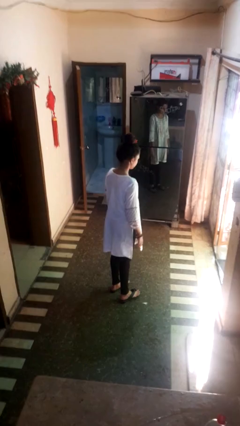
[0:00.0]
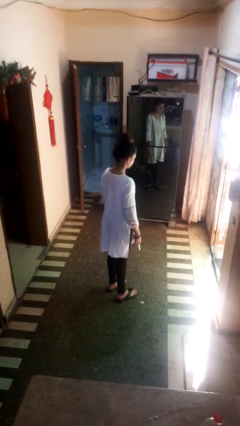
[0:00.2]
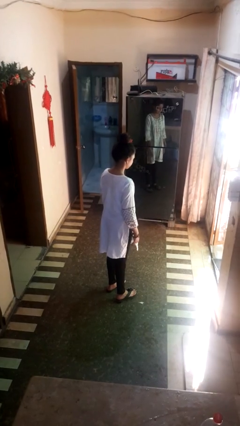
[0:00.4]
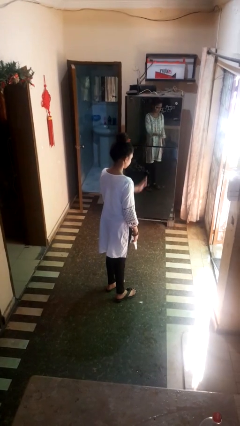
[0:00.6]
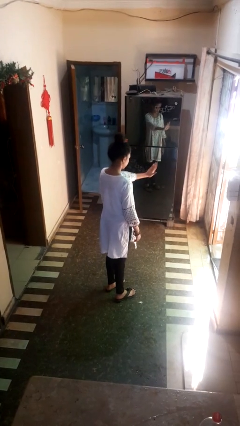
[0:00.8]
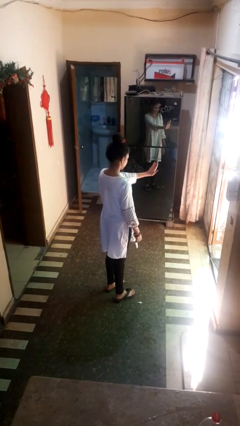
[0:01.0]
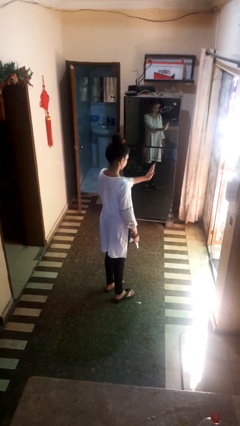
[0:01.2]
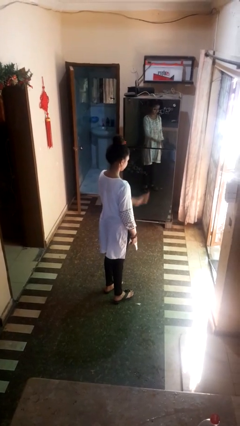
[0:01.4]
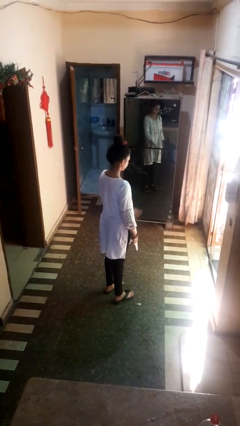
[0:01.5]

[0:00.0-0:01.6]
person gestures stop

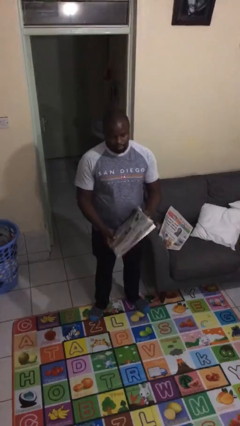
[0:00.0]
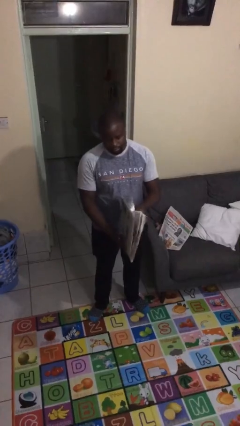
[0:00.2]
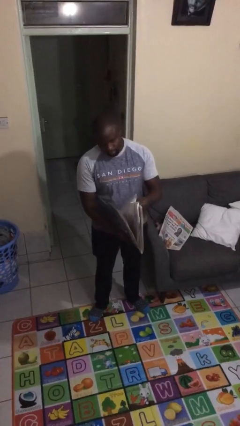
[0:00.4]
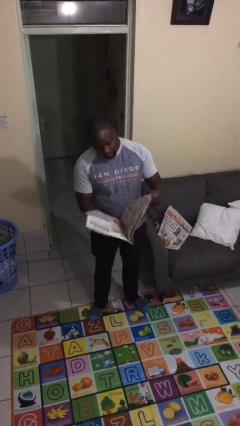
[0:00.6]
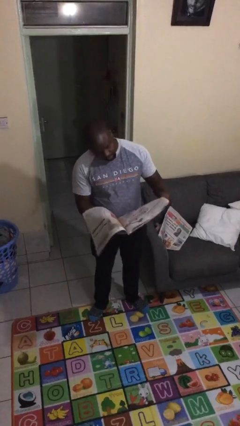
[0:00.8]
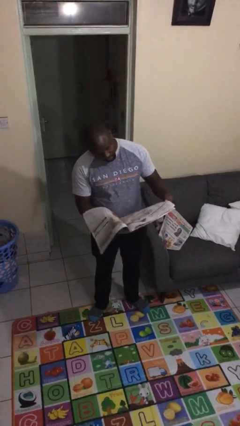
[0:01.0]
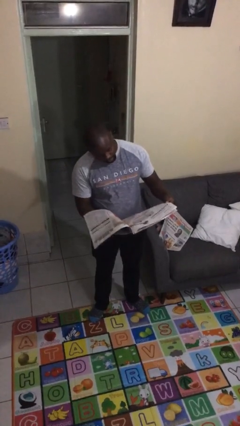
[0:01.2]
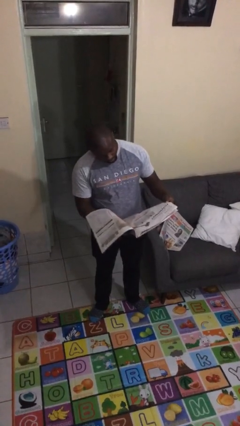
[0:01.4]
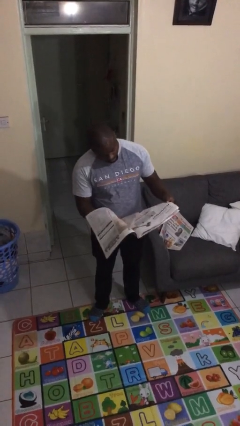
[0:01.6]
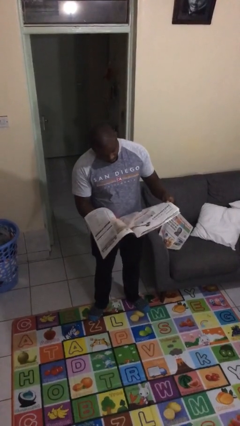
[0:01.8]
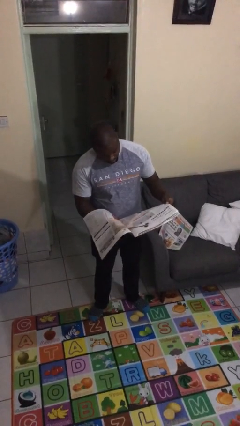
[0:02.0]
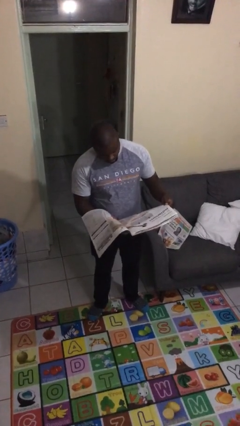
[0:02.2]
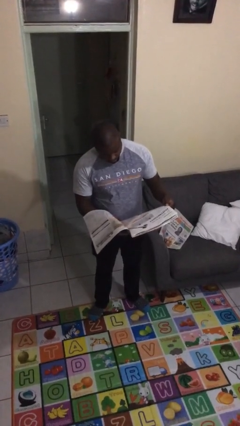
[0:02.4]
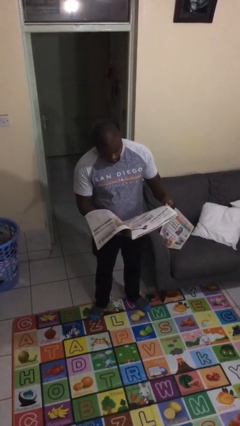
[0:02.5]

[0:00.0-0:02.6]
person reads newspaper

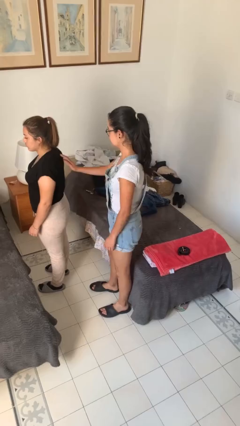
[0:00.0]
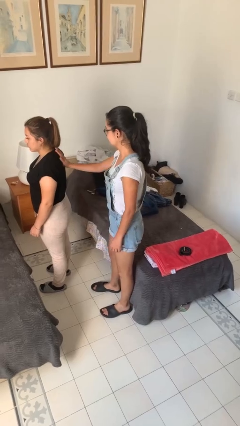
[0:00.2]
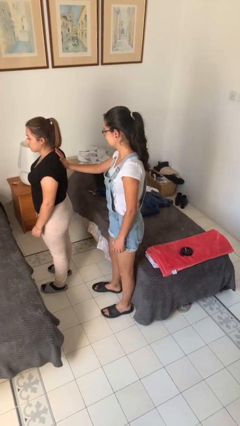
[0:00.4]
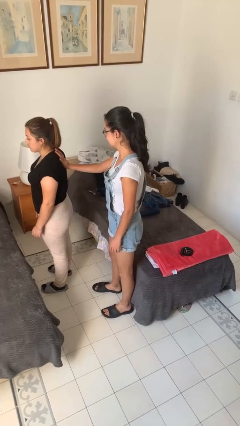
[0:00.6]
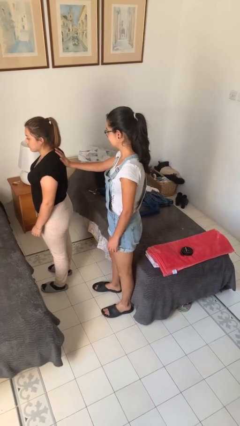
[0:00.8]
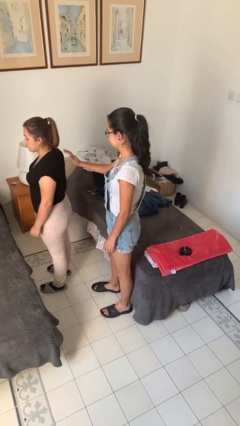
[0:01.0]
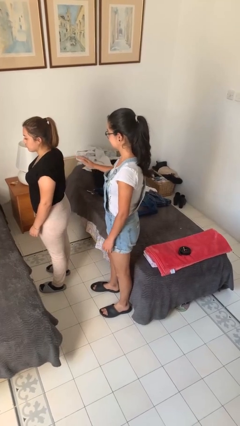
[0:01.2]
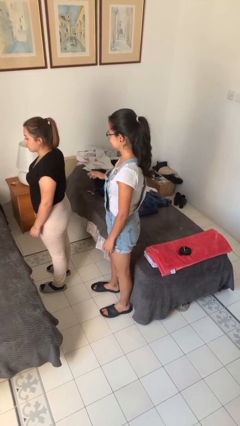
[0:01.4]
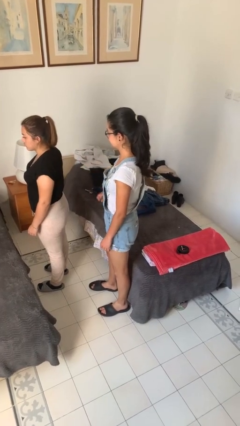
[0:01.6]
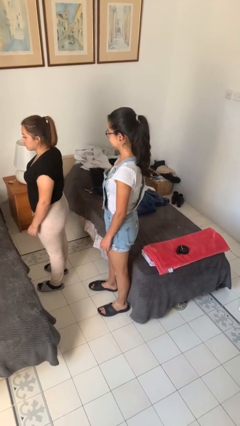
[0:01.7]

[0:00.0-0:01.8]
person touches back of person

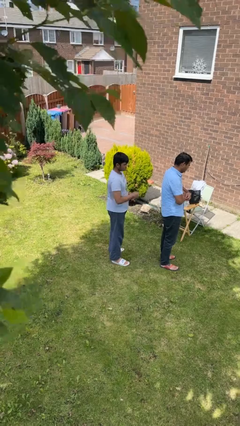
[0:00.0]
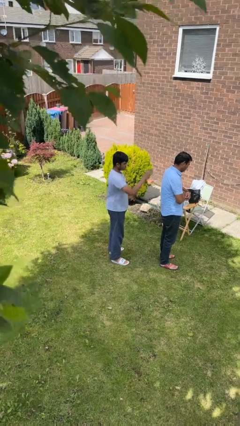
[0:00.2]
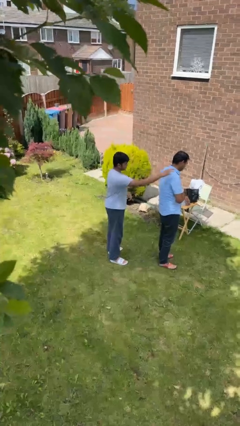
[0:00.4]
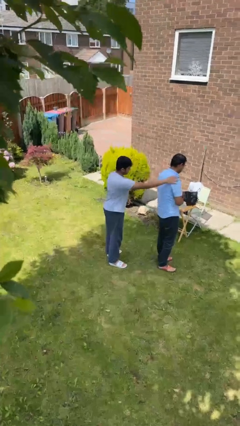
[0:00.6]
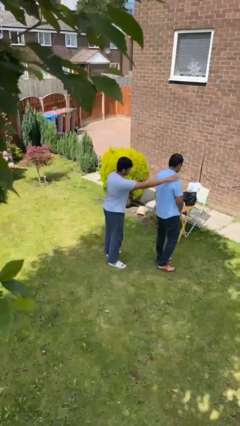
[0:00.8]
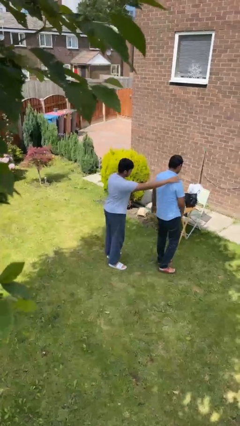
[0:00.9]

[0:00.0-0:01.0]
person grabs person by shoulder

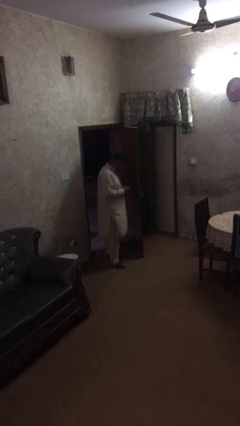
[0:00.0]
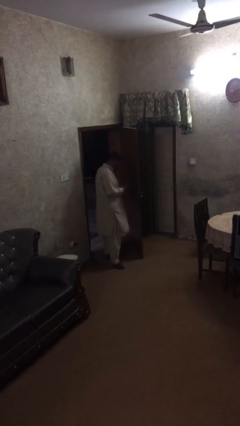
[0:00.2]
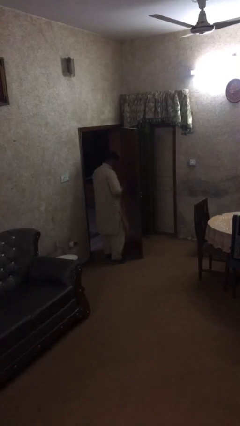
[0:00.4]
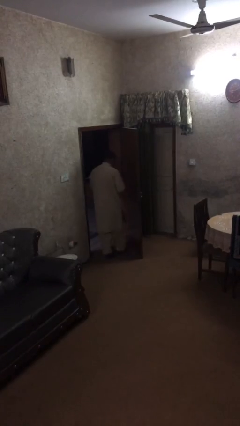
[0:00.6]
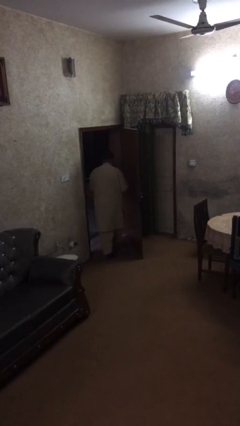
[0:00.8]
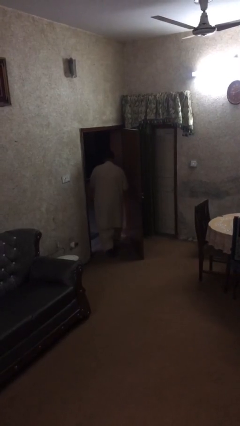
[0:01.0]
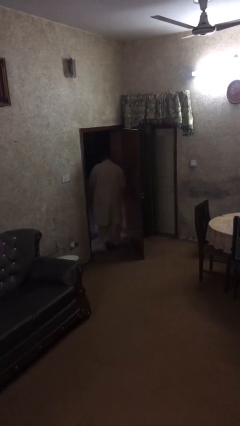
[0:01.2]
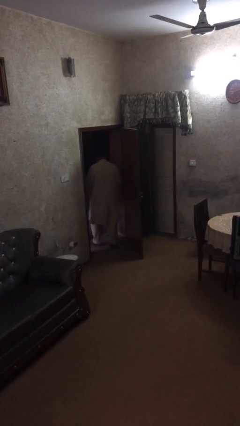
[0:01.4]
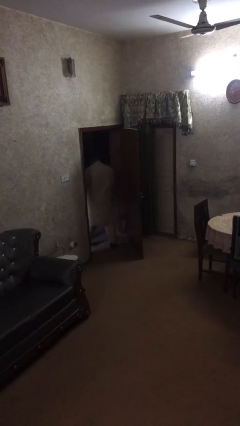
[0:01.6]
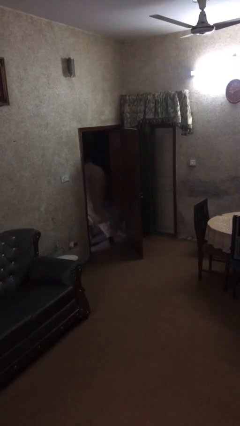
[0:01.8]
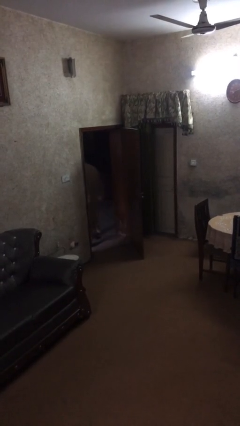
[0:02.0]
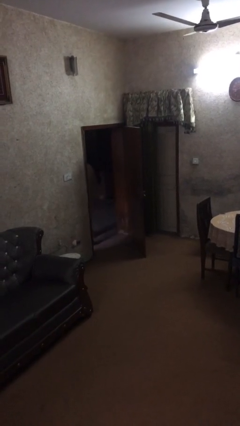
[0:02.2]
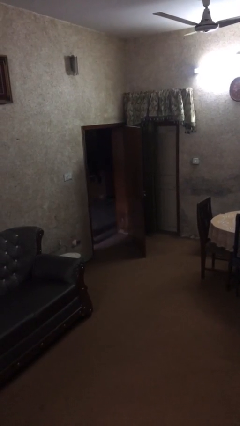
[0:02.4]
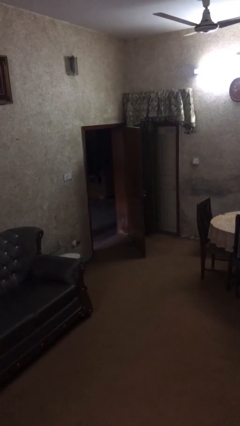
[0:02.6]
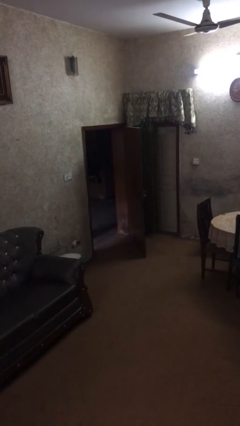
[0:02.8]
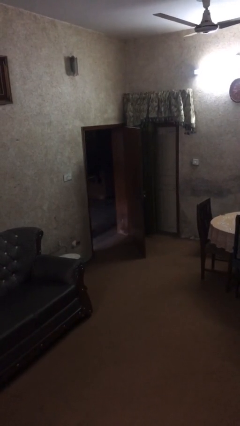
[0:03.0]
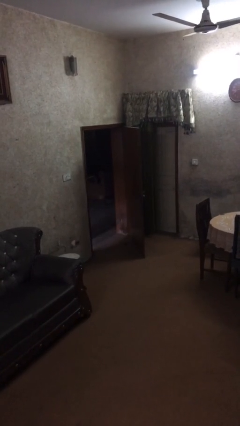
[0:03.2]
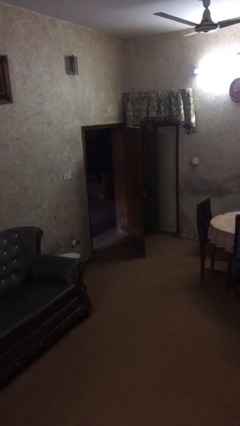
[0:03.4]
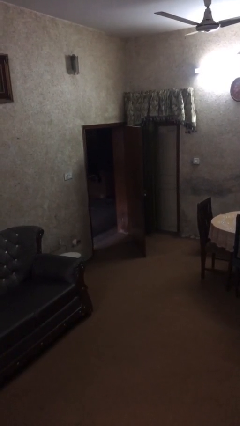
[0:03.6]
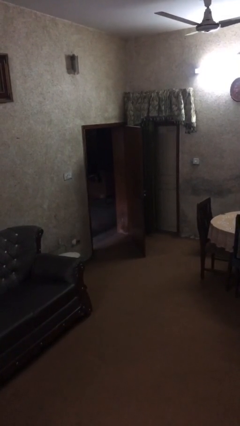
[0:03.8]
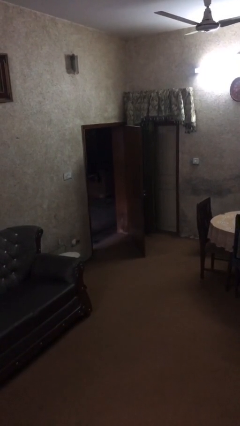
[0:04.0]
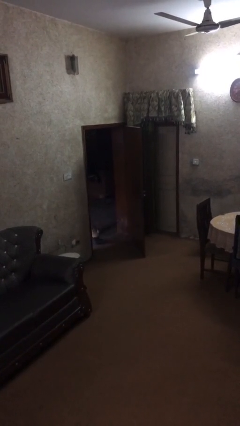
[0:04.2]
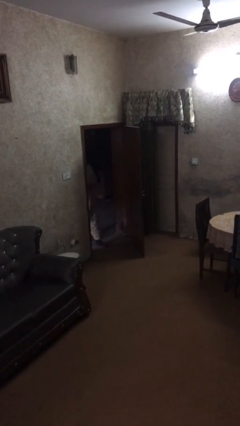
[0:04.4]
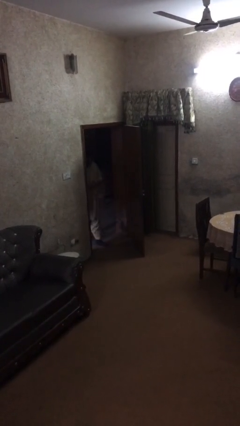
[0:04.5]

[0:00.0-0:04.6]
person exits scene through structure

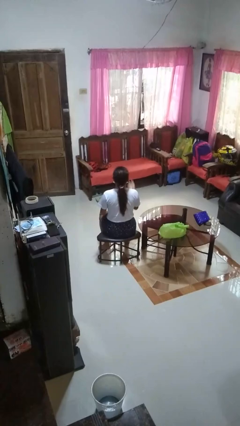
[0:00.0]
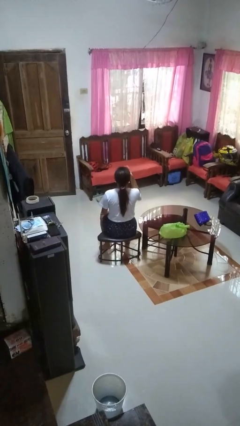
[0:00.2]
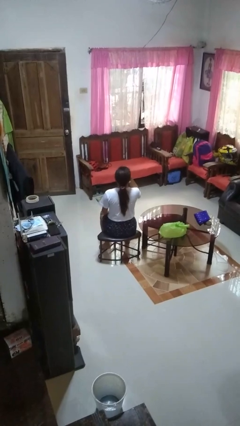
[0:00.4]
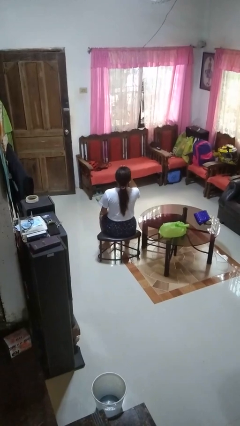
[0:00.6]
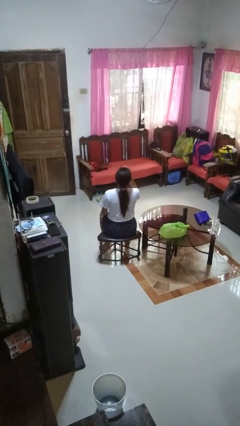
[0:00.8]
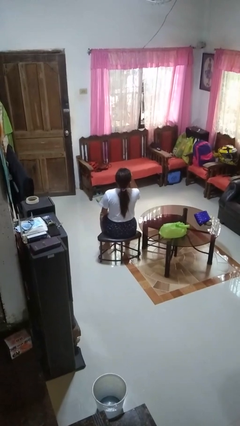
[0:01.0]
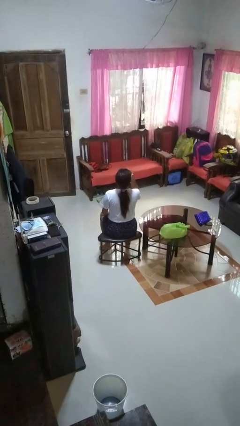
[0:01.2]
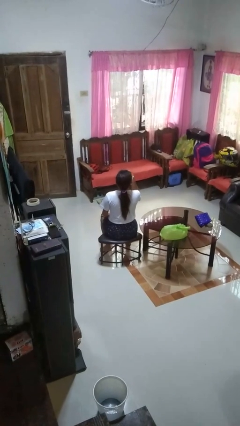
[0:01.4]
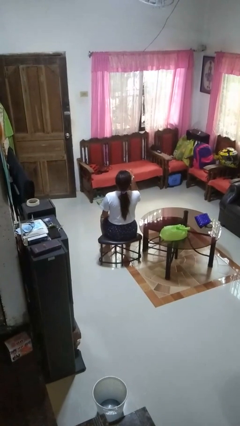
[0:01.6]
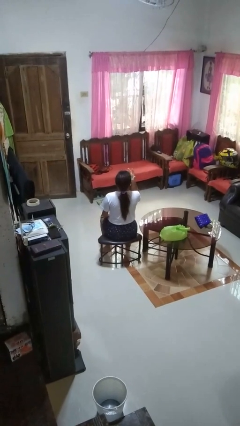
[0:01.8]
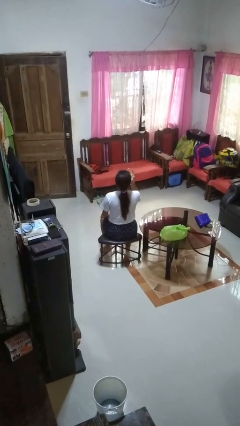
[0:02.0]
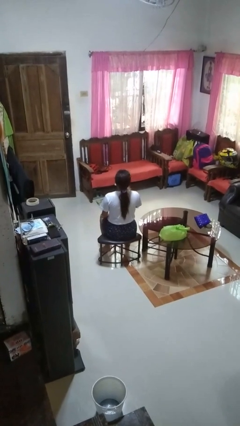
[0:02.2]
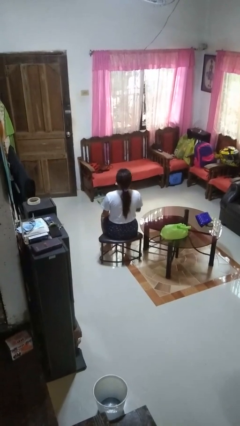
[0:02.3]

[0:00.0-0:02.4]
person licks fingers

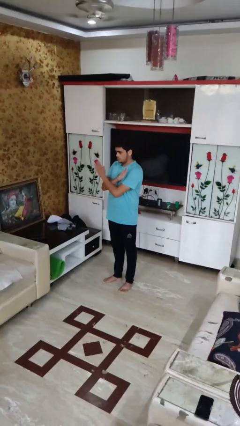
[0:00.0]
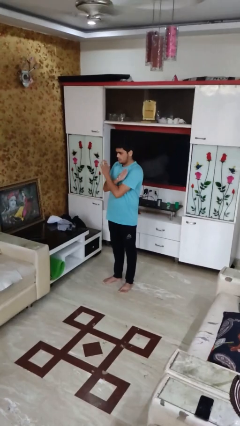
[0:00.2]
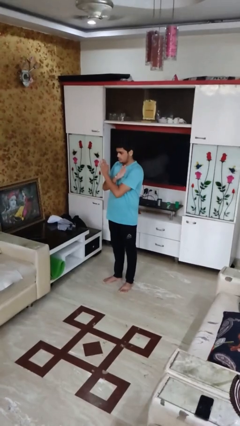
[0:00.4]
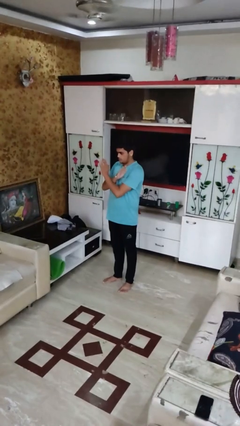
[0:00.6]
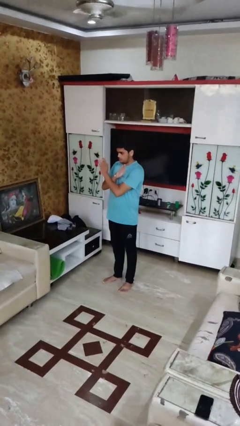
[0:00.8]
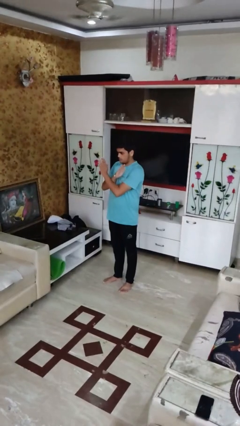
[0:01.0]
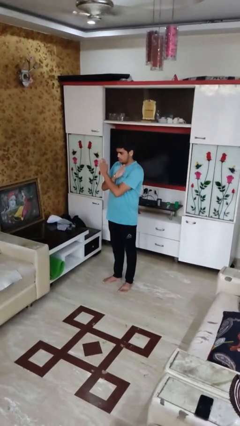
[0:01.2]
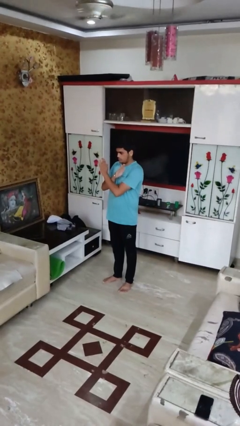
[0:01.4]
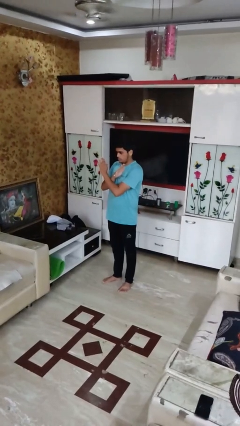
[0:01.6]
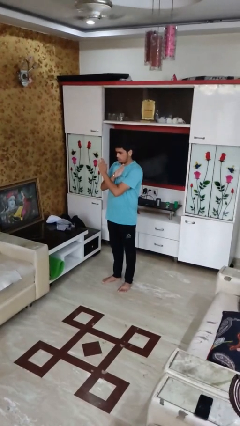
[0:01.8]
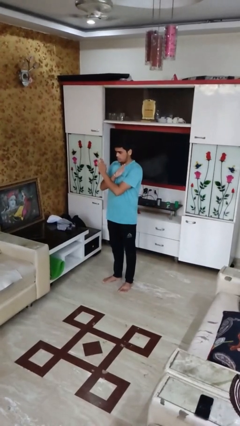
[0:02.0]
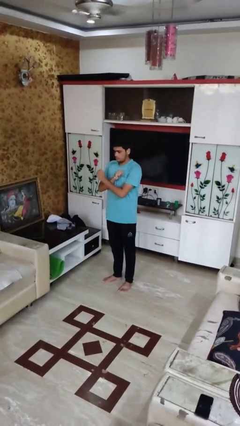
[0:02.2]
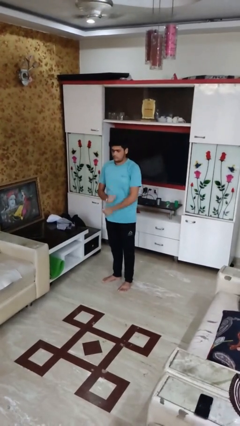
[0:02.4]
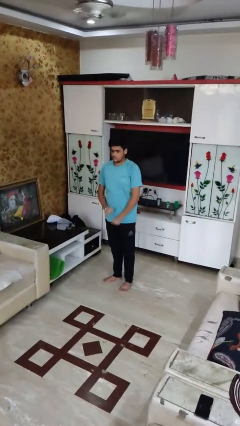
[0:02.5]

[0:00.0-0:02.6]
person gestures arms x

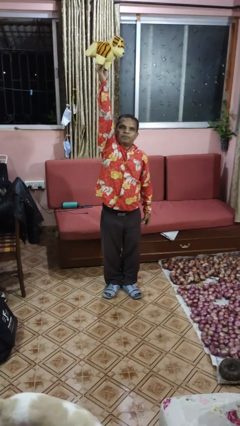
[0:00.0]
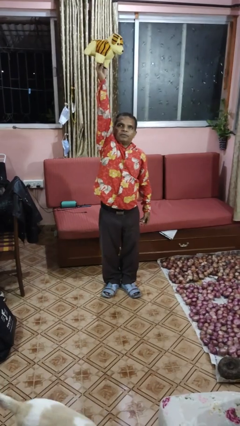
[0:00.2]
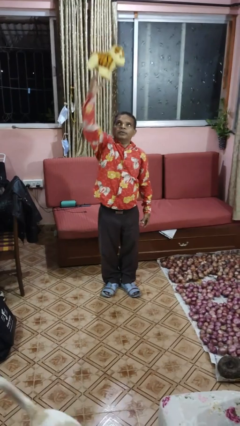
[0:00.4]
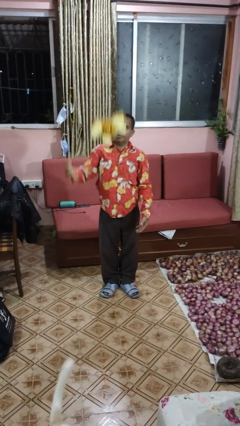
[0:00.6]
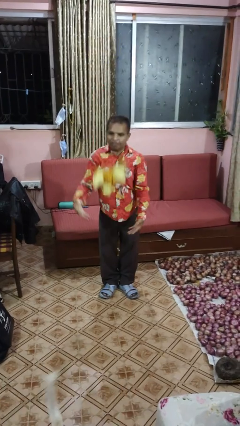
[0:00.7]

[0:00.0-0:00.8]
person drops object
